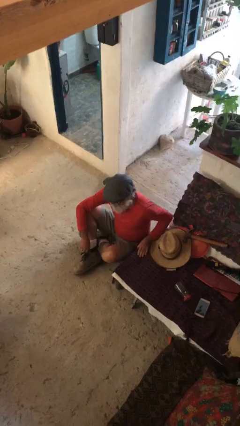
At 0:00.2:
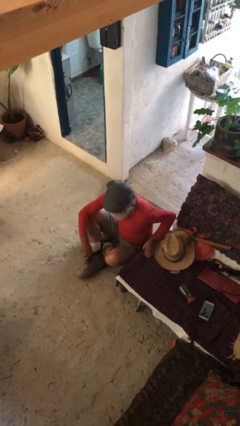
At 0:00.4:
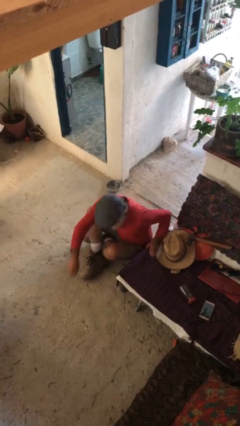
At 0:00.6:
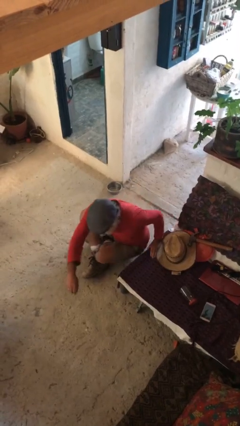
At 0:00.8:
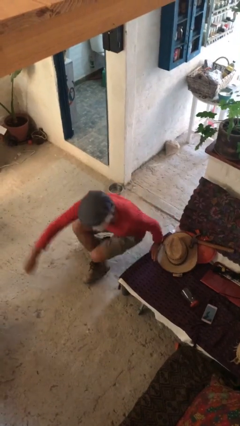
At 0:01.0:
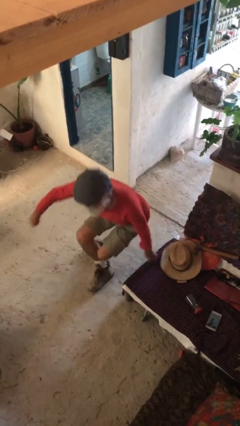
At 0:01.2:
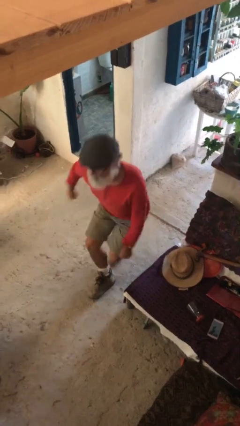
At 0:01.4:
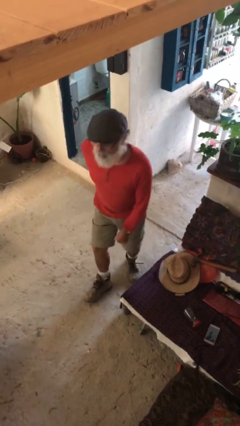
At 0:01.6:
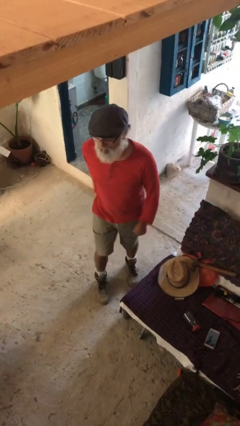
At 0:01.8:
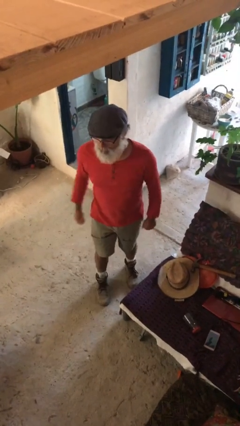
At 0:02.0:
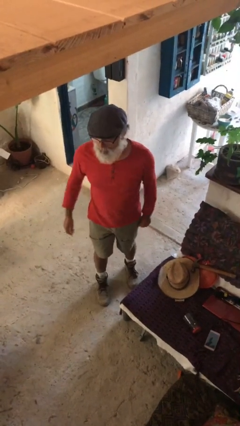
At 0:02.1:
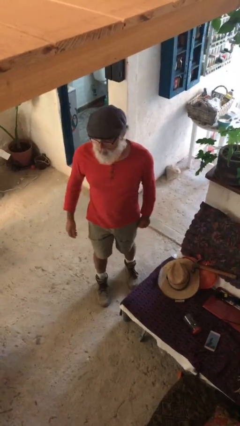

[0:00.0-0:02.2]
person stands up

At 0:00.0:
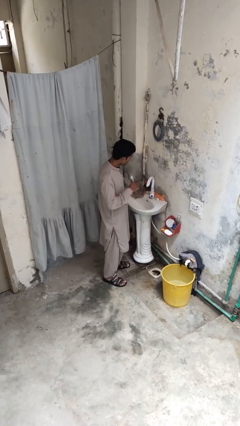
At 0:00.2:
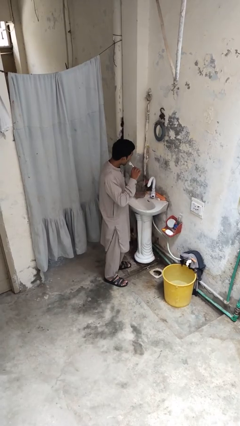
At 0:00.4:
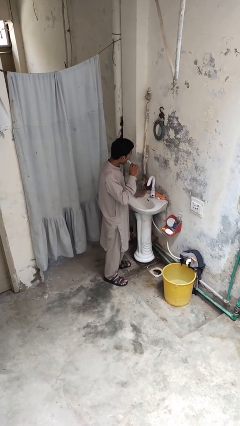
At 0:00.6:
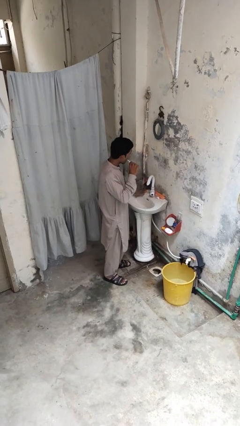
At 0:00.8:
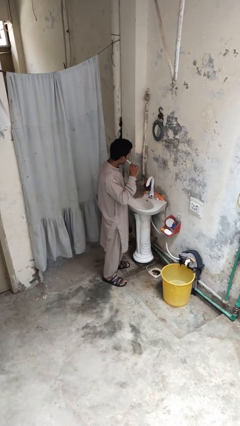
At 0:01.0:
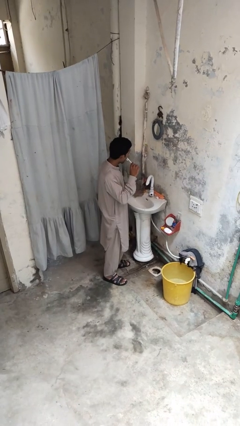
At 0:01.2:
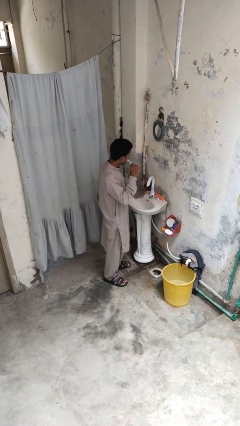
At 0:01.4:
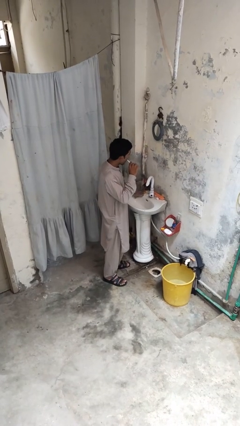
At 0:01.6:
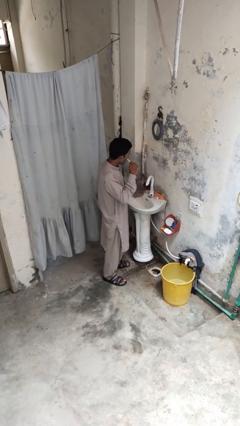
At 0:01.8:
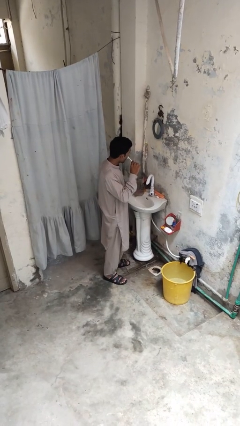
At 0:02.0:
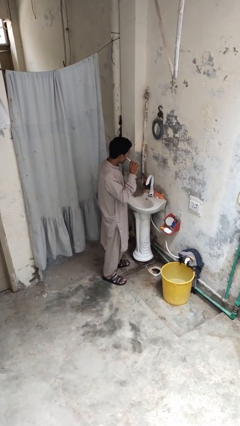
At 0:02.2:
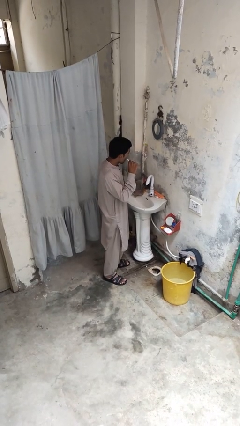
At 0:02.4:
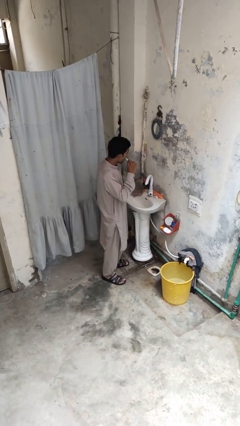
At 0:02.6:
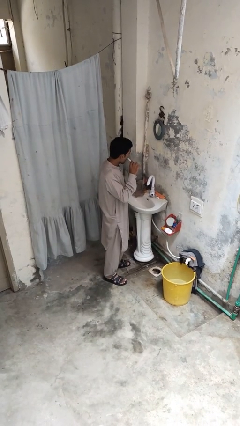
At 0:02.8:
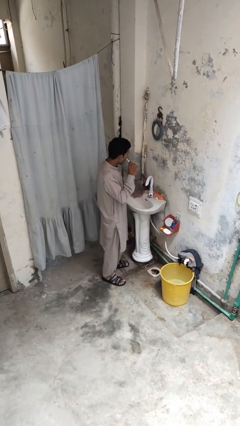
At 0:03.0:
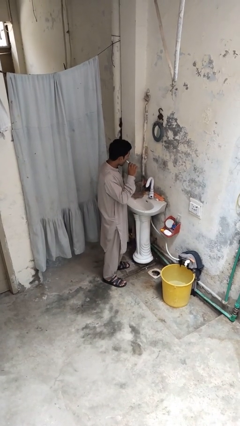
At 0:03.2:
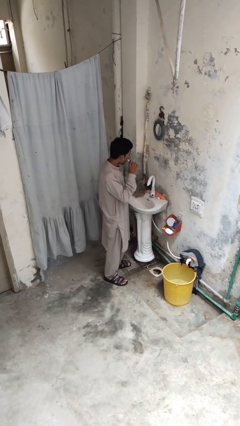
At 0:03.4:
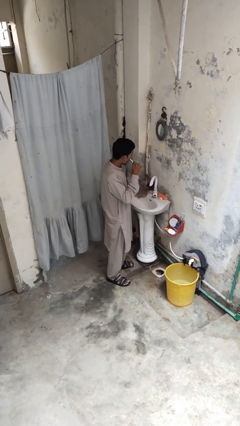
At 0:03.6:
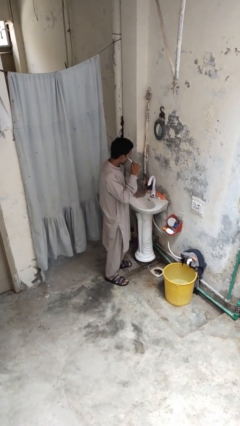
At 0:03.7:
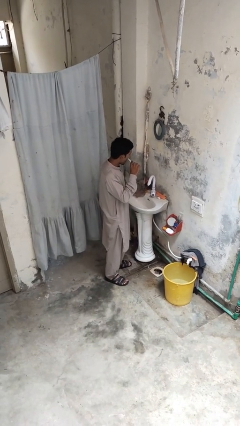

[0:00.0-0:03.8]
person brushes teeth

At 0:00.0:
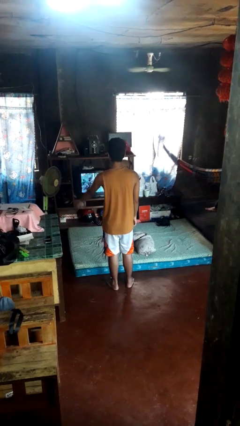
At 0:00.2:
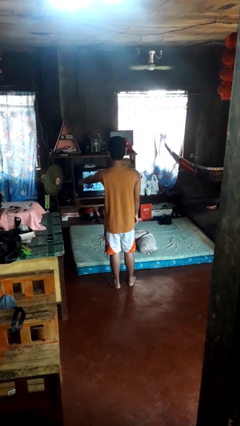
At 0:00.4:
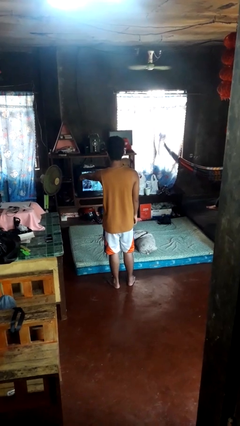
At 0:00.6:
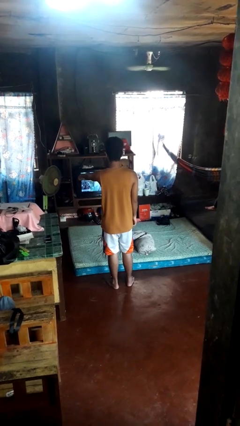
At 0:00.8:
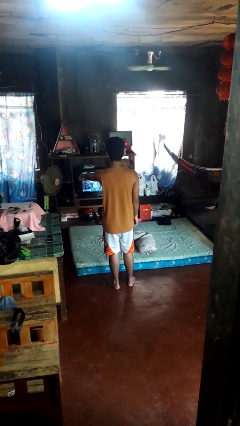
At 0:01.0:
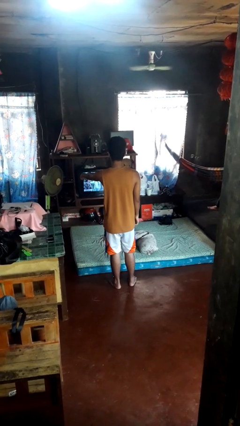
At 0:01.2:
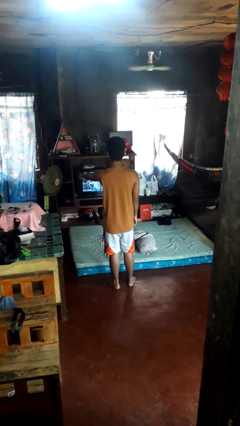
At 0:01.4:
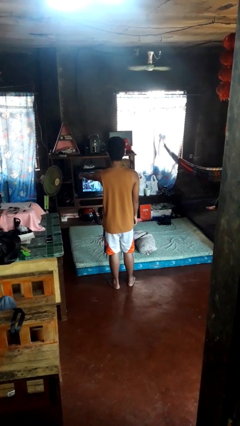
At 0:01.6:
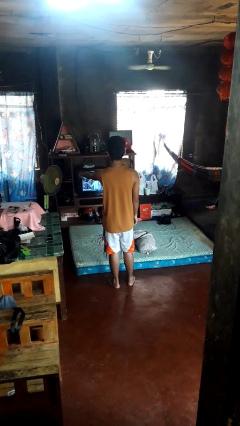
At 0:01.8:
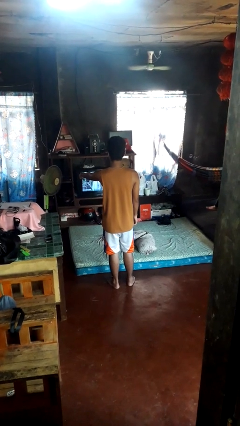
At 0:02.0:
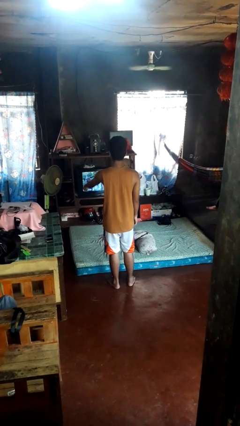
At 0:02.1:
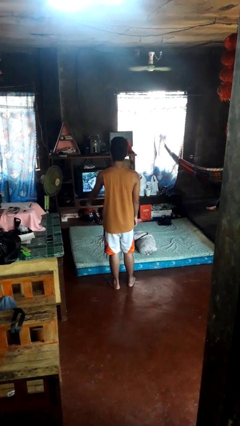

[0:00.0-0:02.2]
person uses television remote

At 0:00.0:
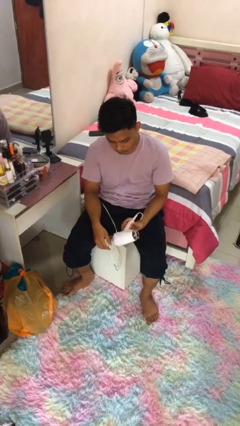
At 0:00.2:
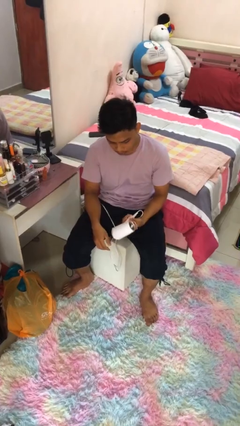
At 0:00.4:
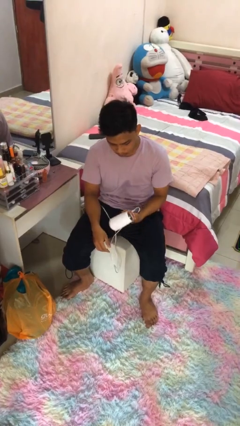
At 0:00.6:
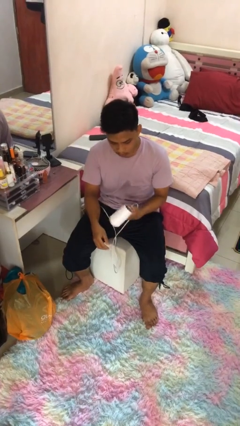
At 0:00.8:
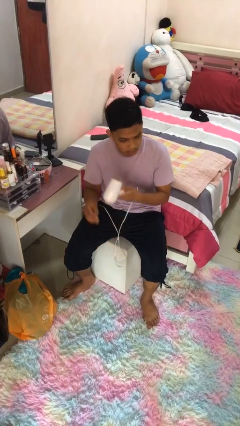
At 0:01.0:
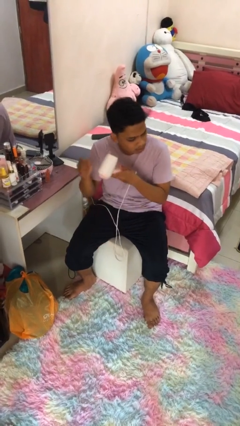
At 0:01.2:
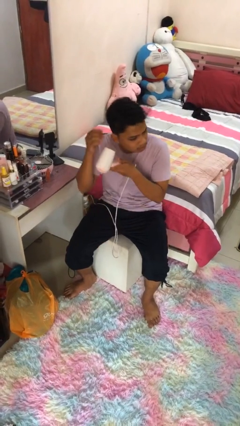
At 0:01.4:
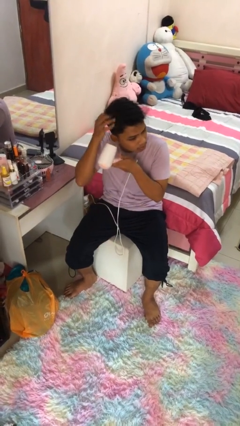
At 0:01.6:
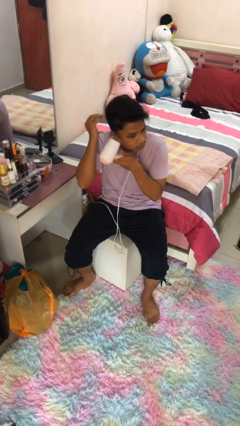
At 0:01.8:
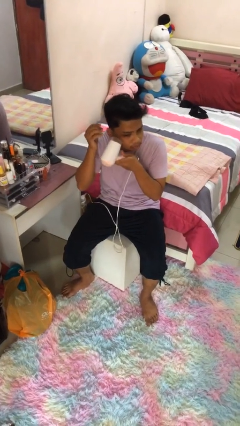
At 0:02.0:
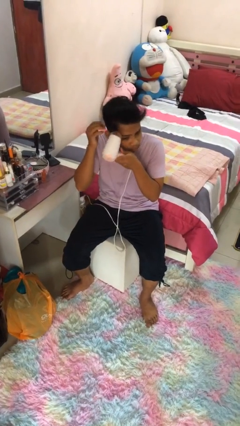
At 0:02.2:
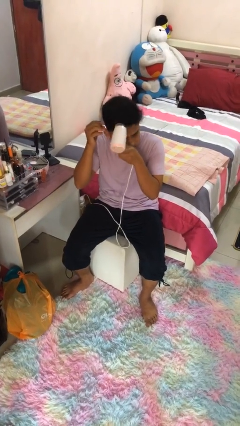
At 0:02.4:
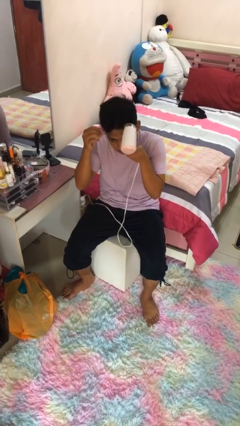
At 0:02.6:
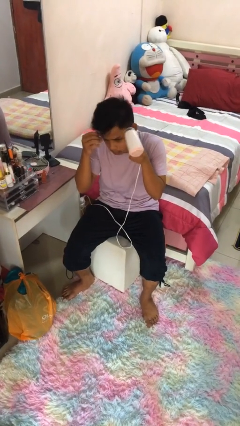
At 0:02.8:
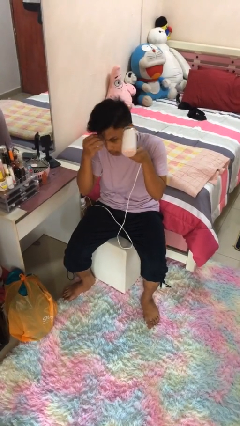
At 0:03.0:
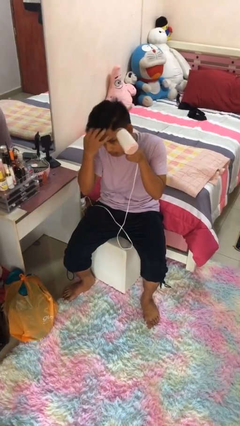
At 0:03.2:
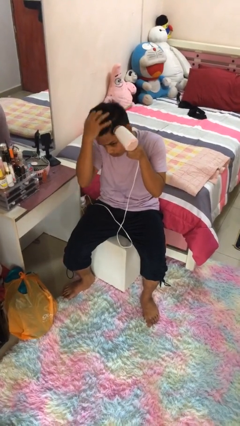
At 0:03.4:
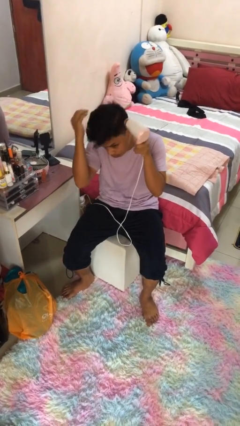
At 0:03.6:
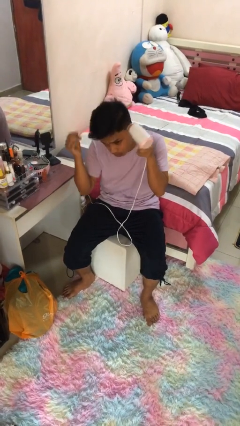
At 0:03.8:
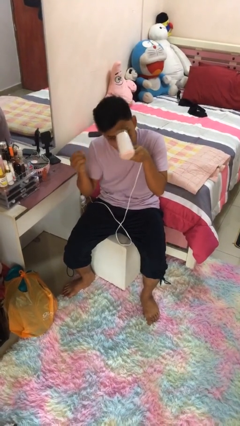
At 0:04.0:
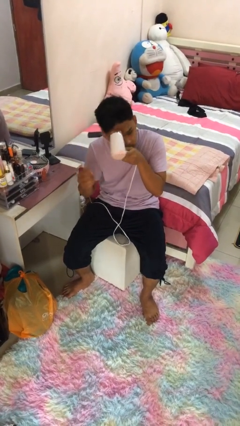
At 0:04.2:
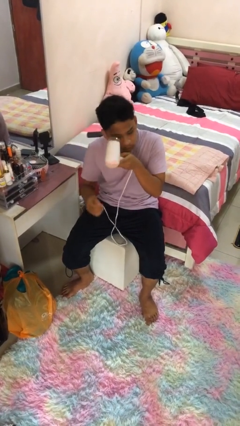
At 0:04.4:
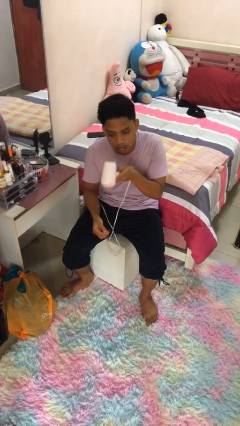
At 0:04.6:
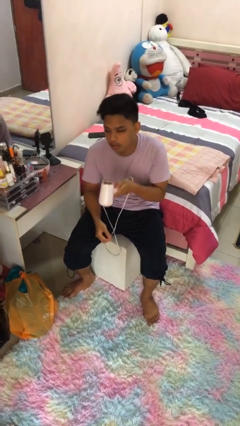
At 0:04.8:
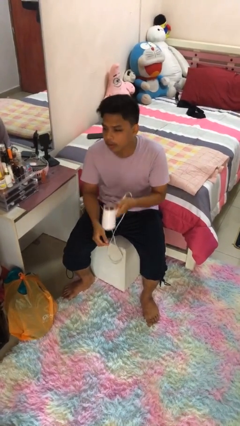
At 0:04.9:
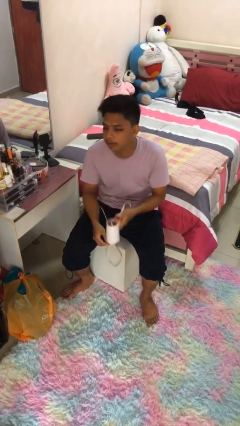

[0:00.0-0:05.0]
person dries hair with hairdryer

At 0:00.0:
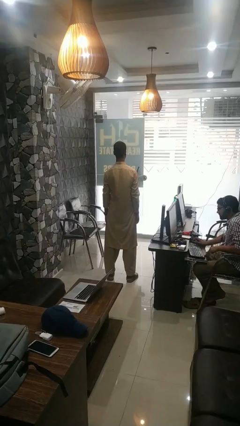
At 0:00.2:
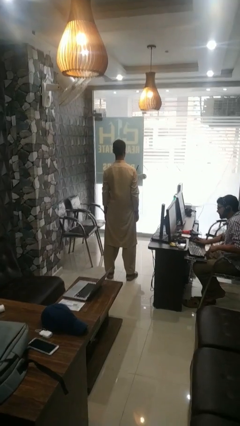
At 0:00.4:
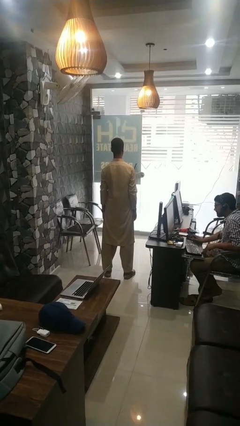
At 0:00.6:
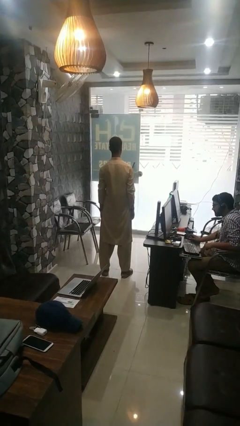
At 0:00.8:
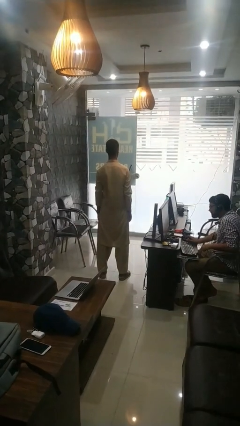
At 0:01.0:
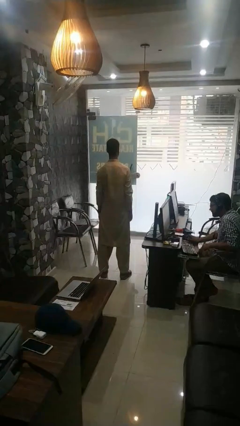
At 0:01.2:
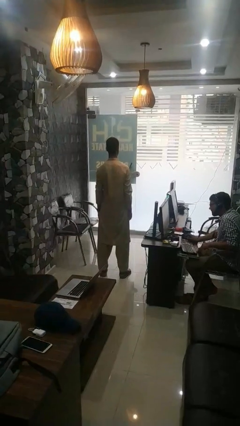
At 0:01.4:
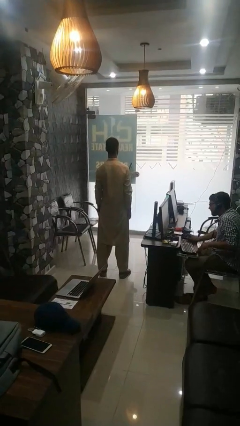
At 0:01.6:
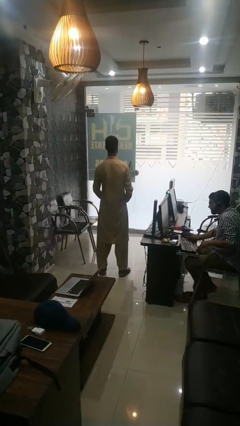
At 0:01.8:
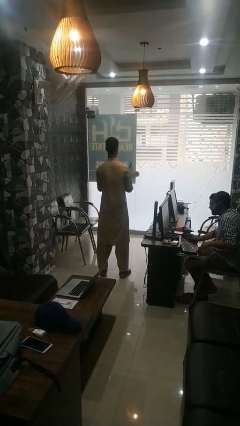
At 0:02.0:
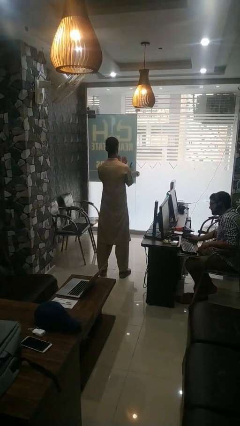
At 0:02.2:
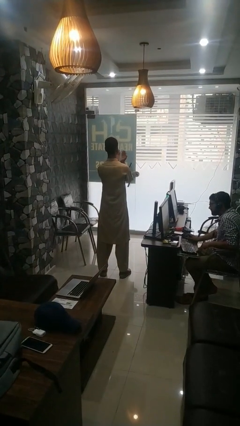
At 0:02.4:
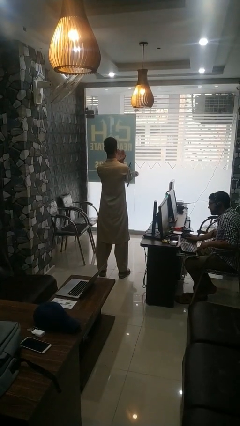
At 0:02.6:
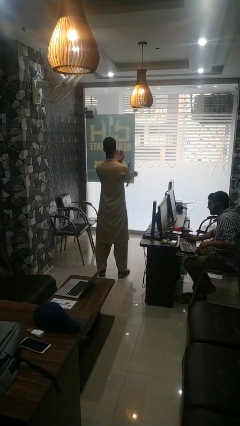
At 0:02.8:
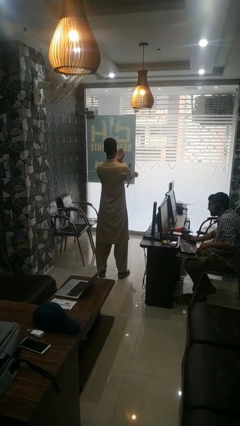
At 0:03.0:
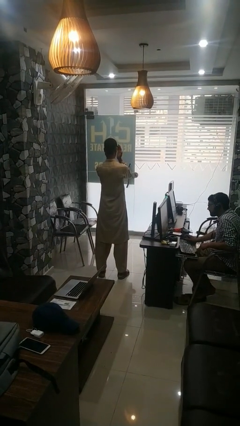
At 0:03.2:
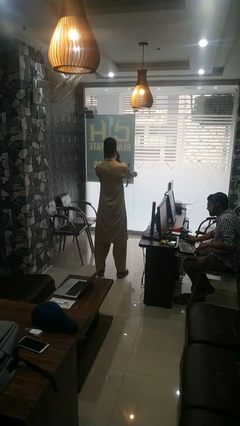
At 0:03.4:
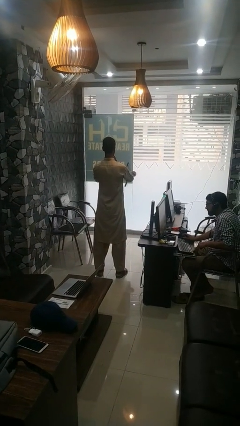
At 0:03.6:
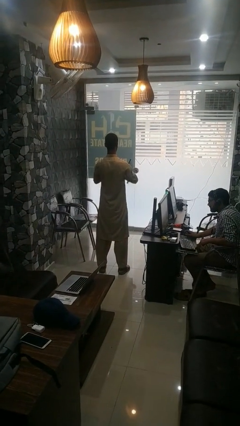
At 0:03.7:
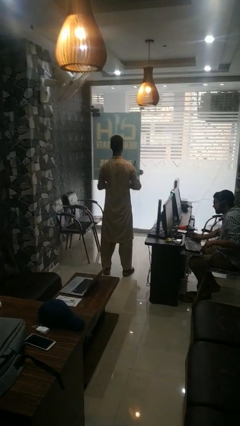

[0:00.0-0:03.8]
person prays

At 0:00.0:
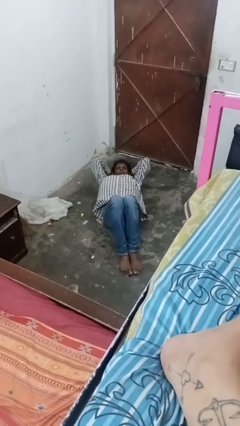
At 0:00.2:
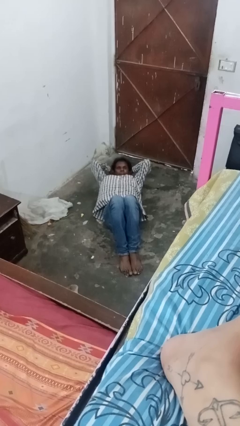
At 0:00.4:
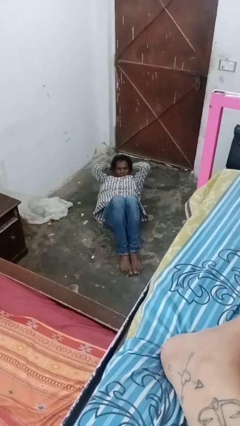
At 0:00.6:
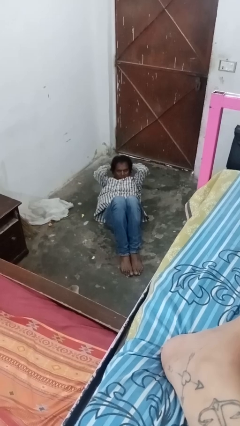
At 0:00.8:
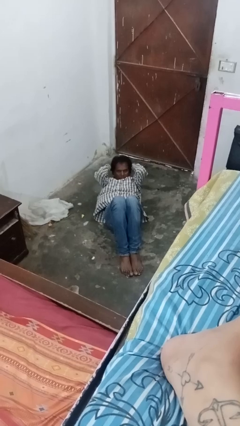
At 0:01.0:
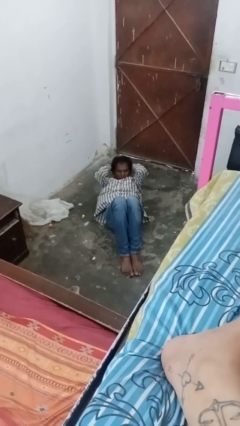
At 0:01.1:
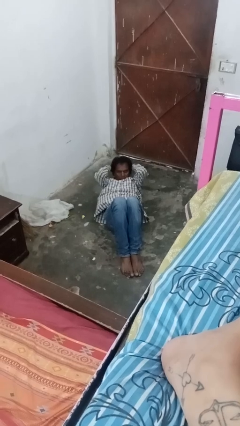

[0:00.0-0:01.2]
person exercises with situp
